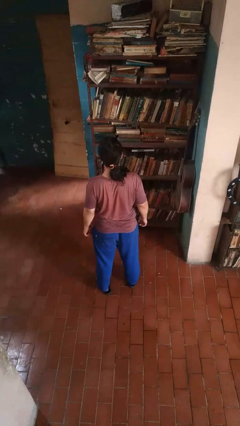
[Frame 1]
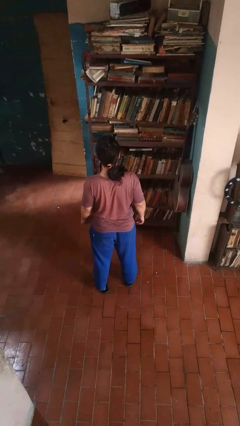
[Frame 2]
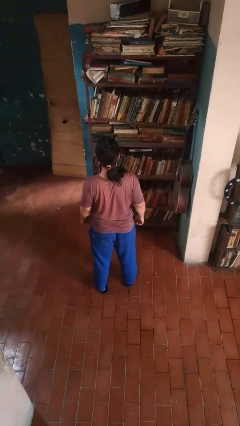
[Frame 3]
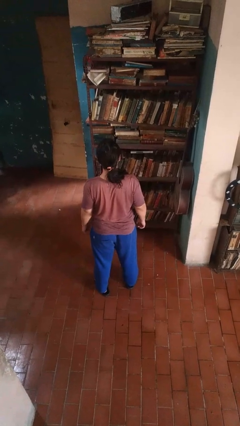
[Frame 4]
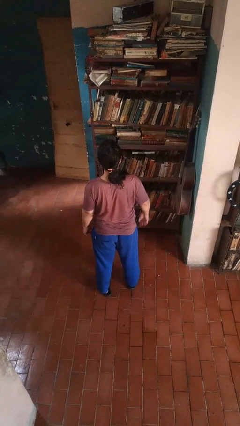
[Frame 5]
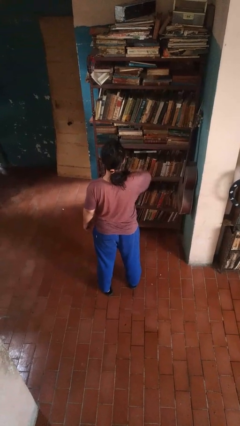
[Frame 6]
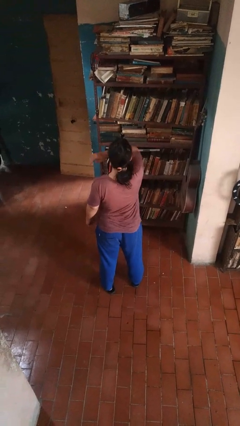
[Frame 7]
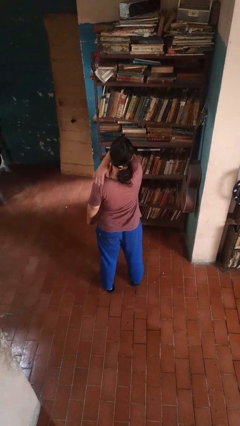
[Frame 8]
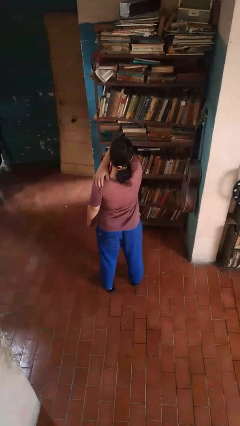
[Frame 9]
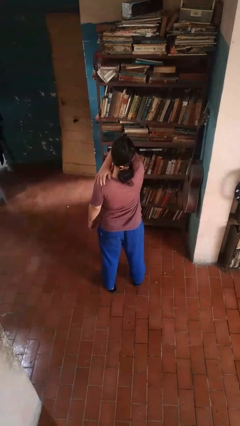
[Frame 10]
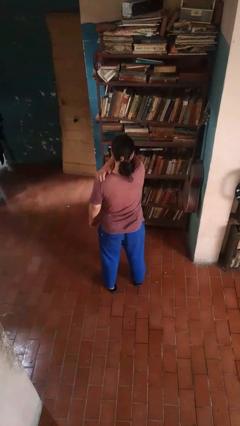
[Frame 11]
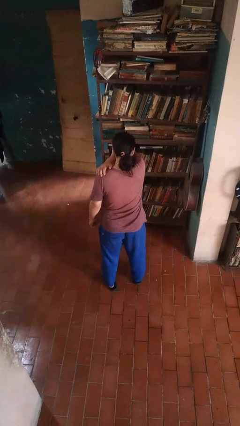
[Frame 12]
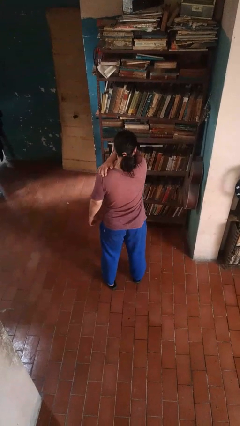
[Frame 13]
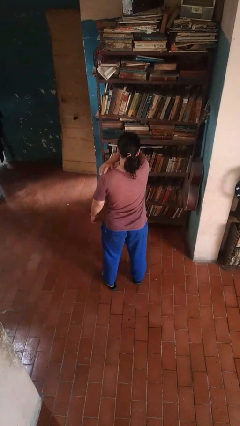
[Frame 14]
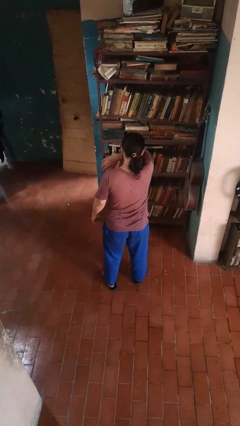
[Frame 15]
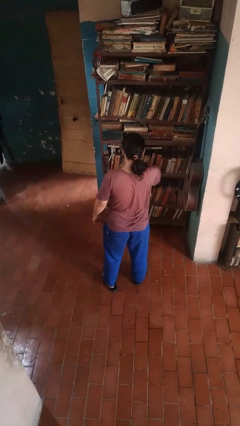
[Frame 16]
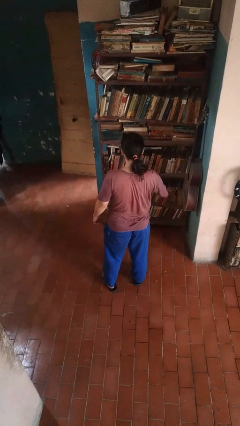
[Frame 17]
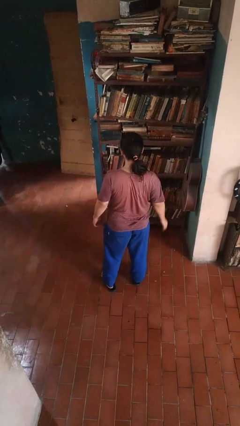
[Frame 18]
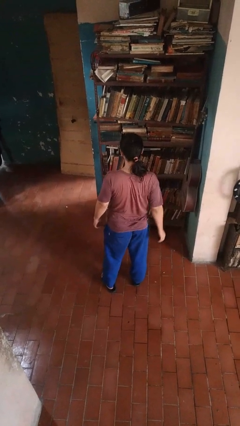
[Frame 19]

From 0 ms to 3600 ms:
person sneezes into arm

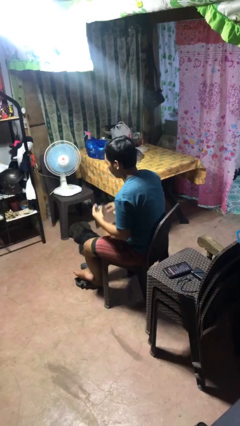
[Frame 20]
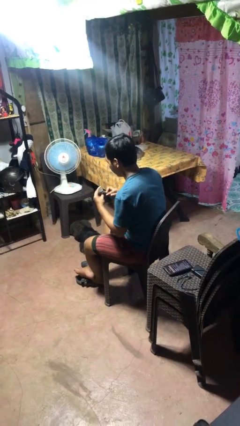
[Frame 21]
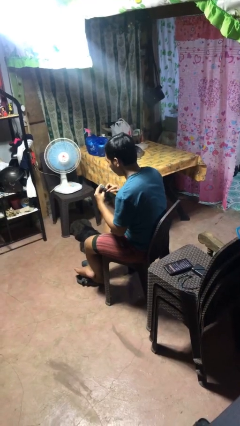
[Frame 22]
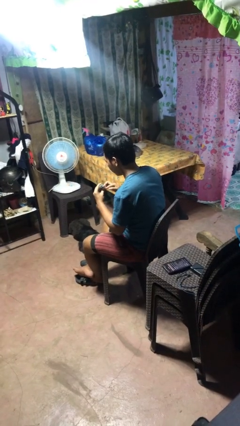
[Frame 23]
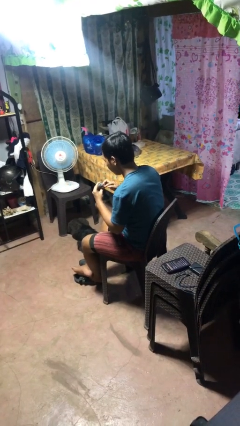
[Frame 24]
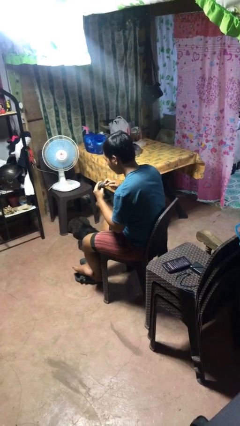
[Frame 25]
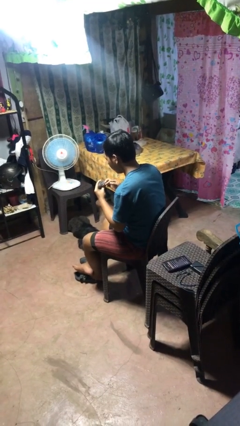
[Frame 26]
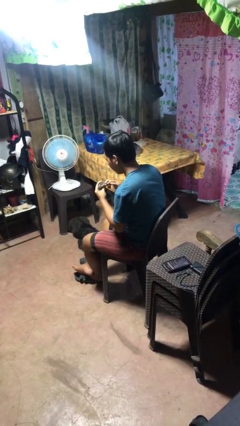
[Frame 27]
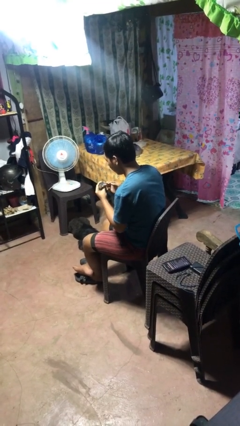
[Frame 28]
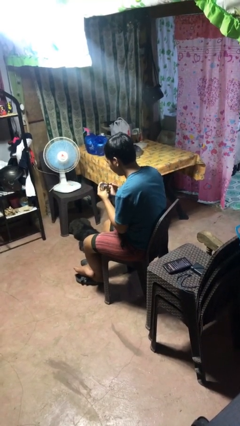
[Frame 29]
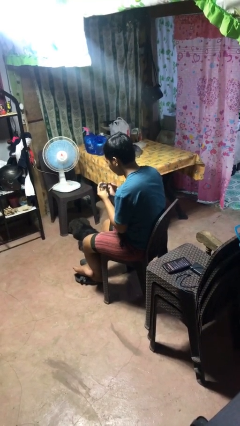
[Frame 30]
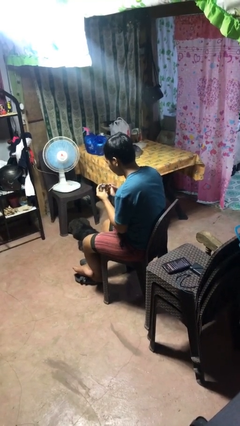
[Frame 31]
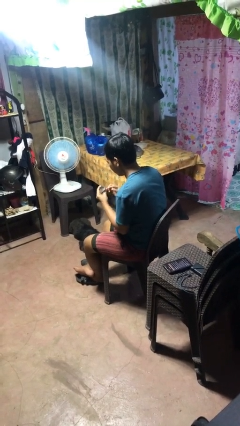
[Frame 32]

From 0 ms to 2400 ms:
person clips fingernails

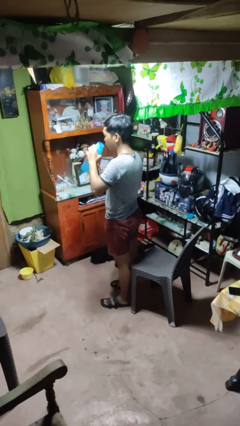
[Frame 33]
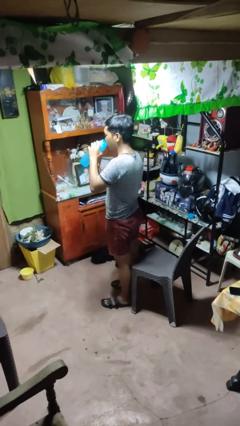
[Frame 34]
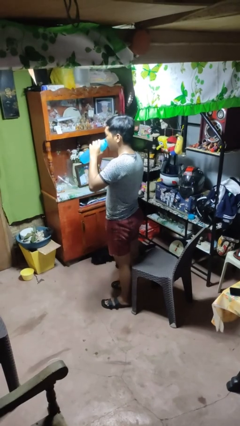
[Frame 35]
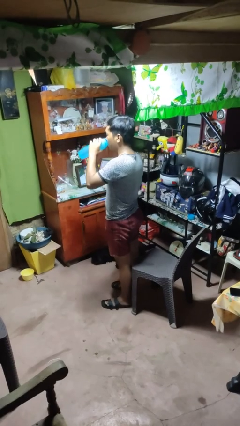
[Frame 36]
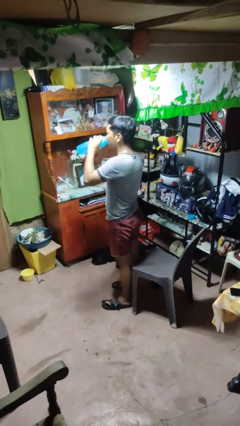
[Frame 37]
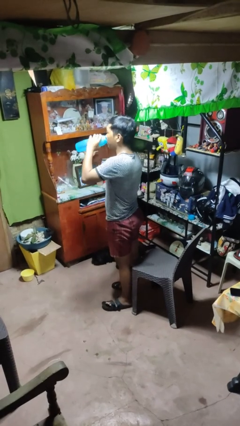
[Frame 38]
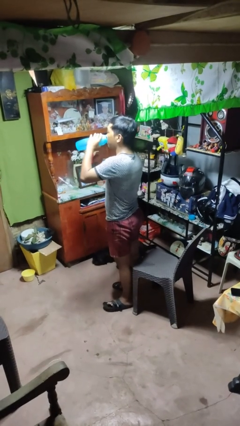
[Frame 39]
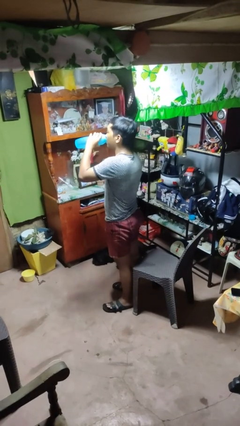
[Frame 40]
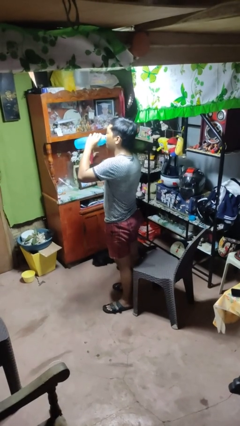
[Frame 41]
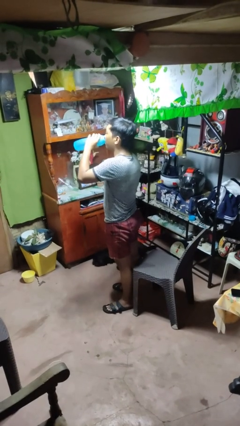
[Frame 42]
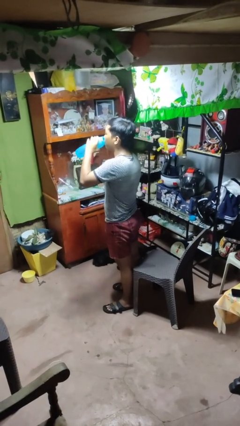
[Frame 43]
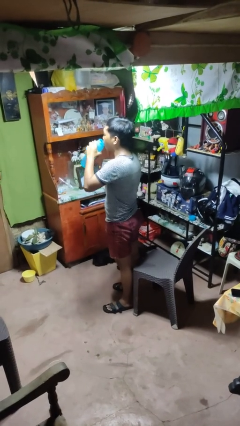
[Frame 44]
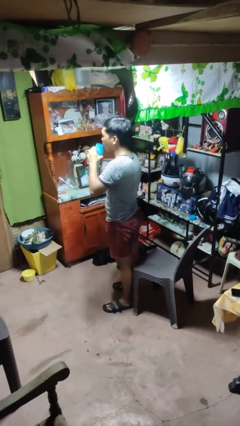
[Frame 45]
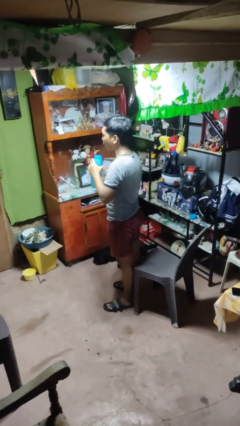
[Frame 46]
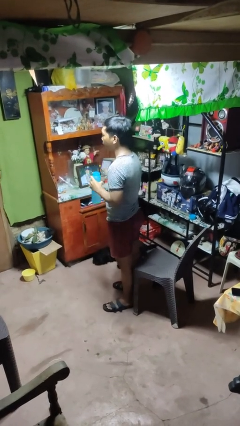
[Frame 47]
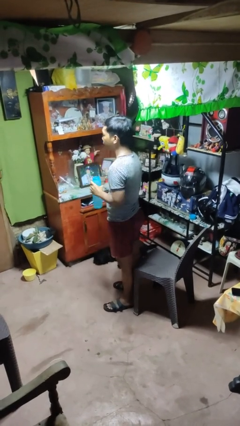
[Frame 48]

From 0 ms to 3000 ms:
person drinks from bottle

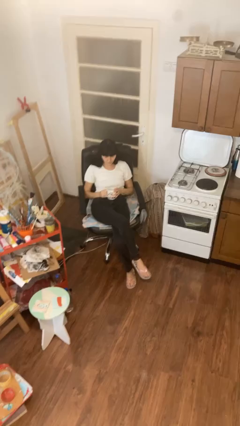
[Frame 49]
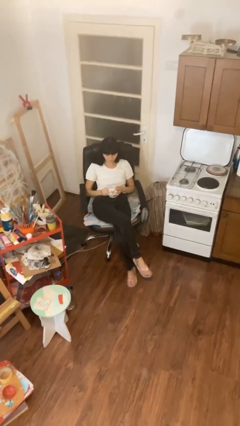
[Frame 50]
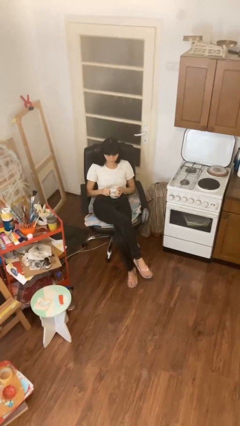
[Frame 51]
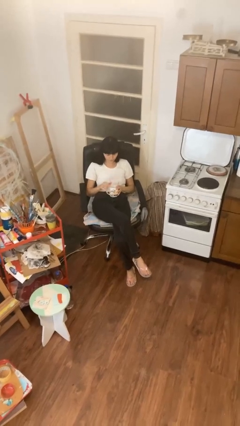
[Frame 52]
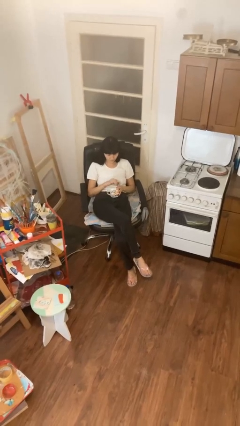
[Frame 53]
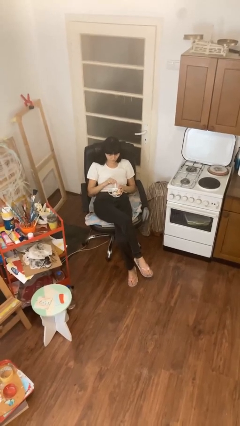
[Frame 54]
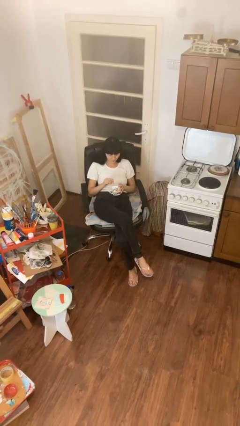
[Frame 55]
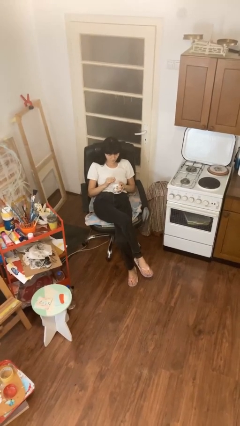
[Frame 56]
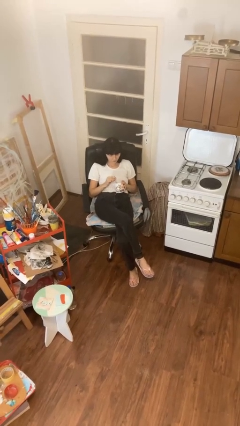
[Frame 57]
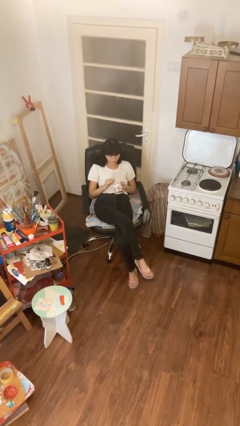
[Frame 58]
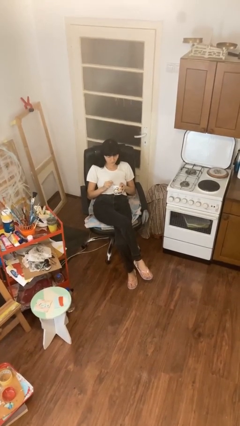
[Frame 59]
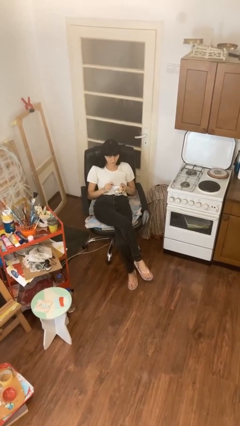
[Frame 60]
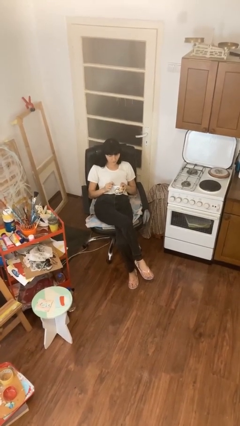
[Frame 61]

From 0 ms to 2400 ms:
person stirs mug

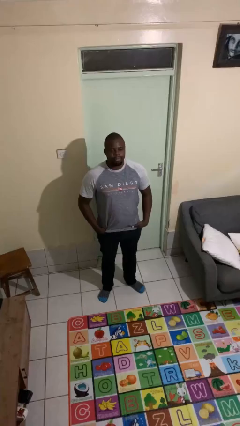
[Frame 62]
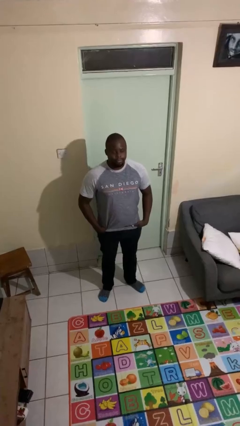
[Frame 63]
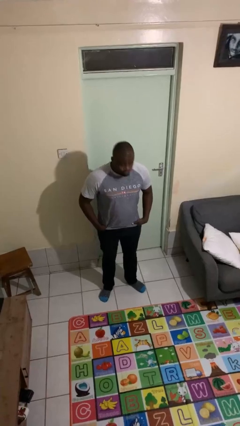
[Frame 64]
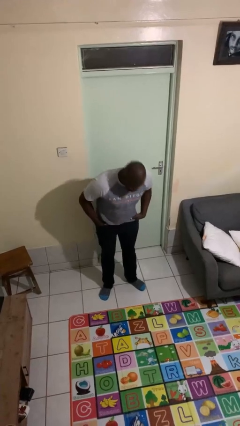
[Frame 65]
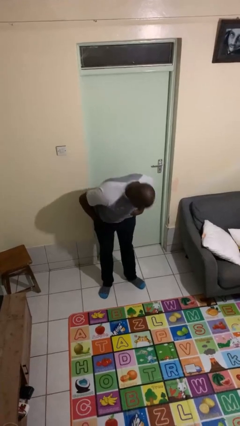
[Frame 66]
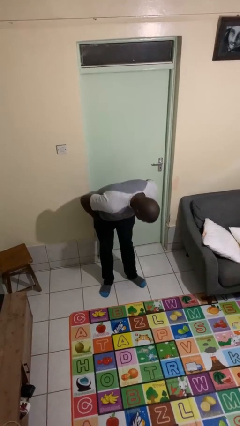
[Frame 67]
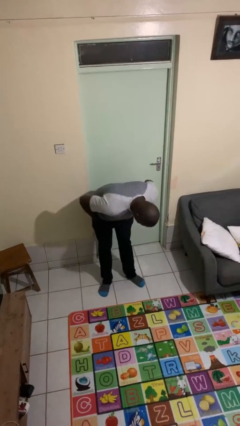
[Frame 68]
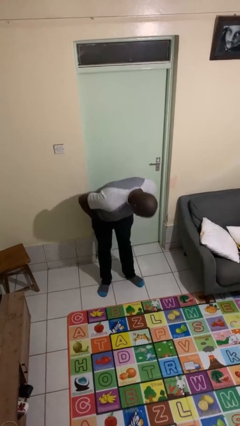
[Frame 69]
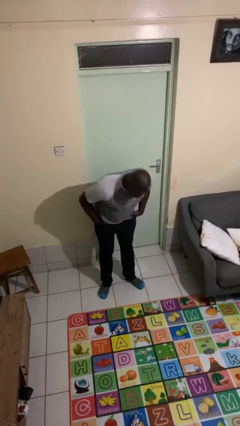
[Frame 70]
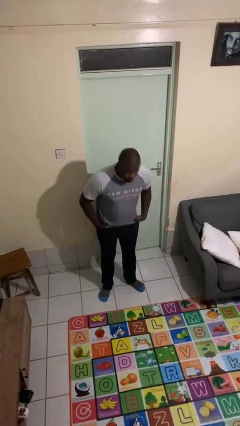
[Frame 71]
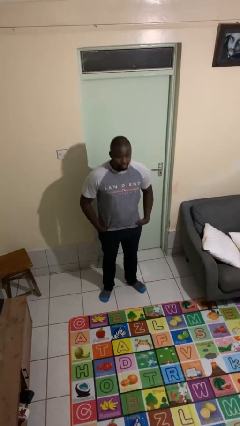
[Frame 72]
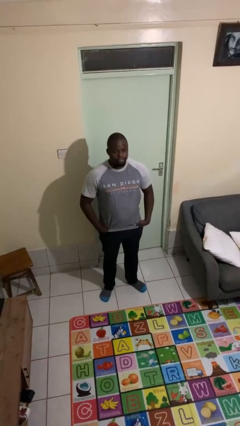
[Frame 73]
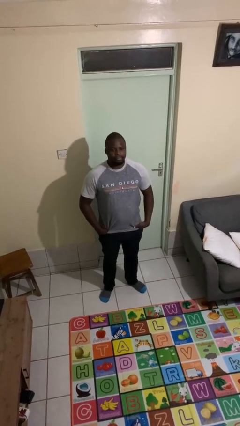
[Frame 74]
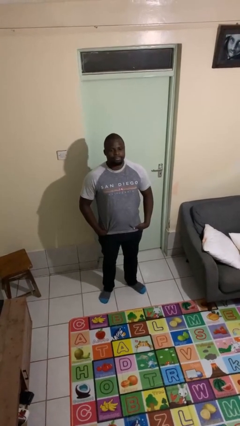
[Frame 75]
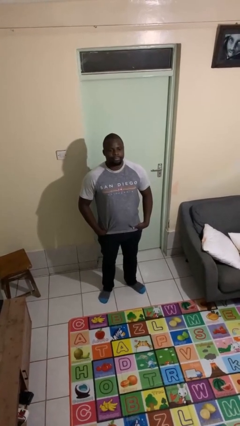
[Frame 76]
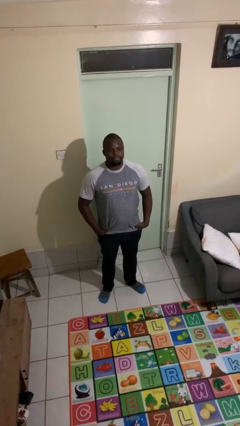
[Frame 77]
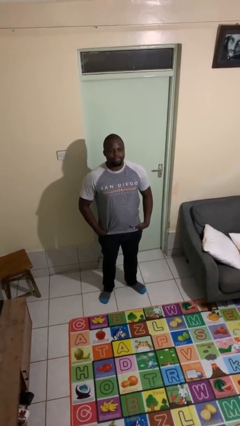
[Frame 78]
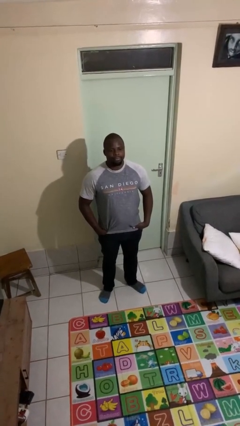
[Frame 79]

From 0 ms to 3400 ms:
person bows

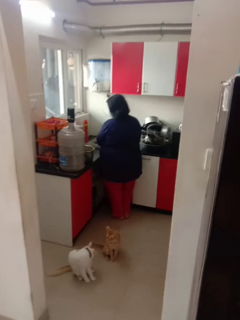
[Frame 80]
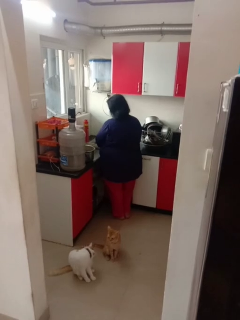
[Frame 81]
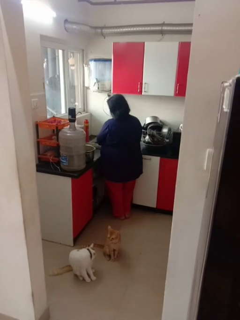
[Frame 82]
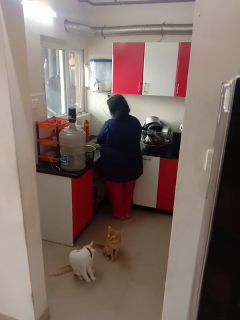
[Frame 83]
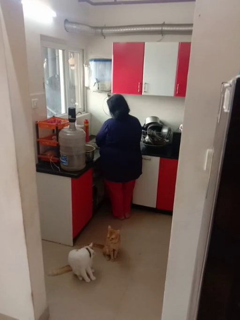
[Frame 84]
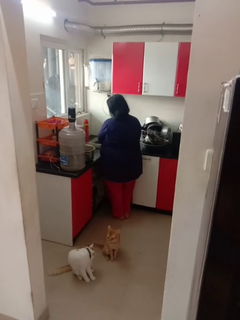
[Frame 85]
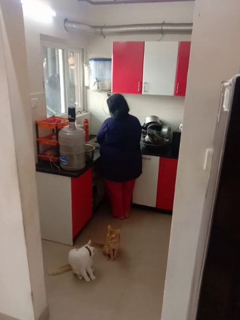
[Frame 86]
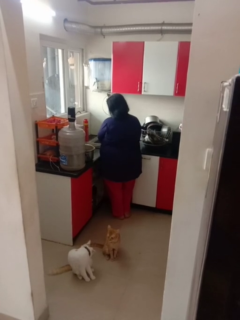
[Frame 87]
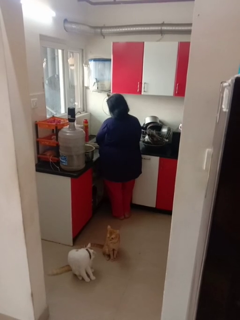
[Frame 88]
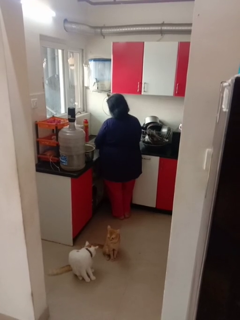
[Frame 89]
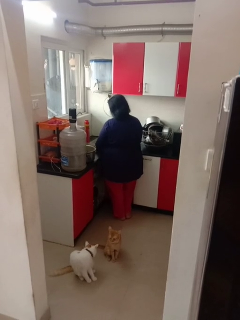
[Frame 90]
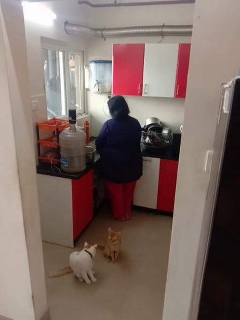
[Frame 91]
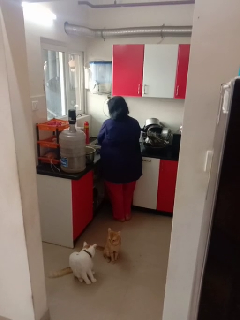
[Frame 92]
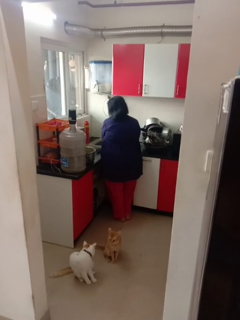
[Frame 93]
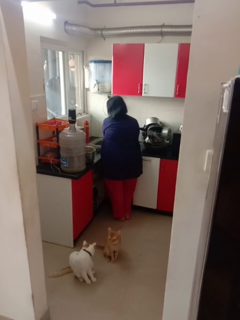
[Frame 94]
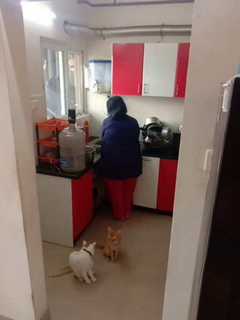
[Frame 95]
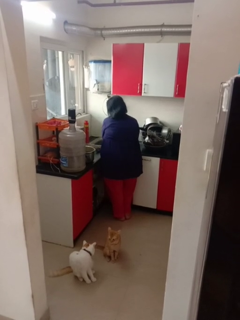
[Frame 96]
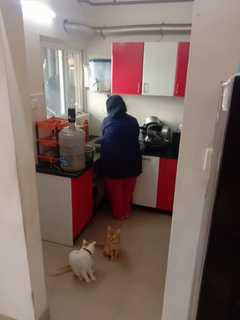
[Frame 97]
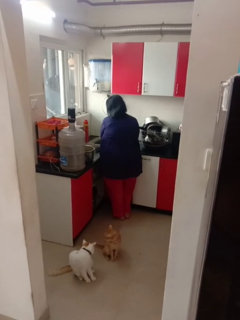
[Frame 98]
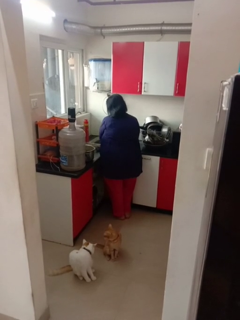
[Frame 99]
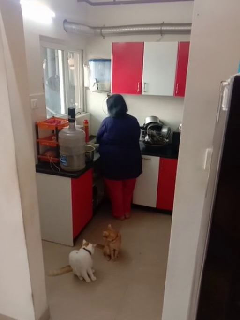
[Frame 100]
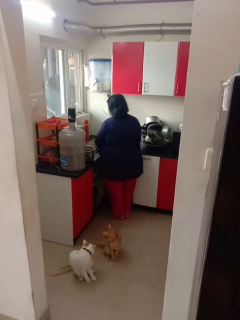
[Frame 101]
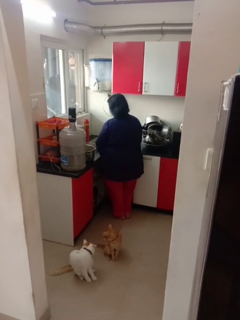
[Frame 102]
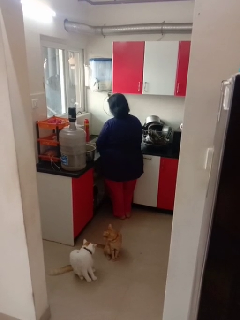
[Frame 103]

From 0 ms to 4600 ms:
person washes dish
